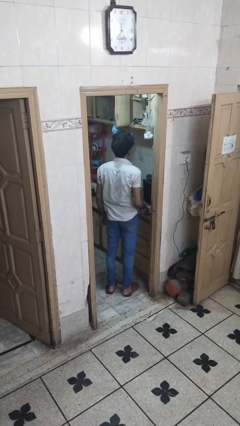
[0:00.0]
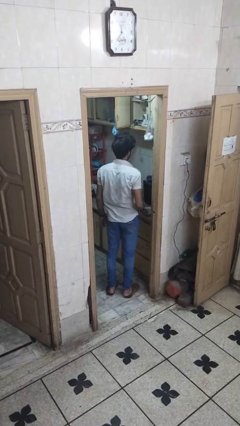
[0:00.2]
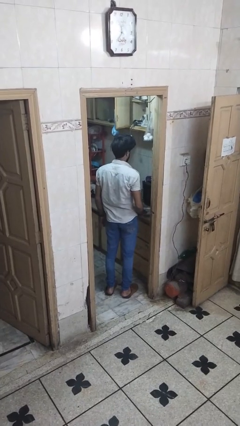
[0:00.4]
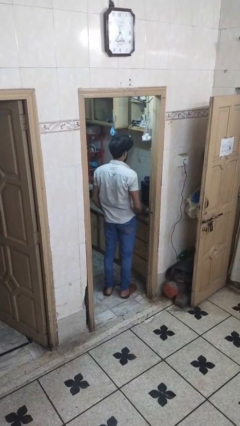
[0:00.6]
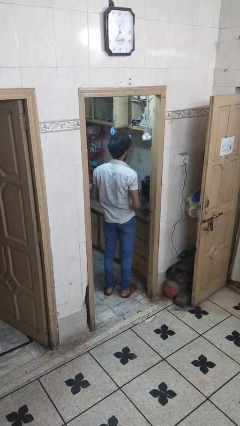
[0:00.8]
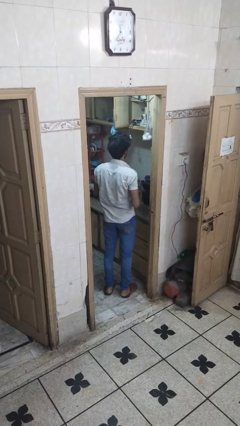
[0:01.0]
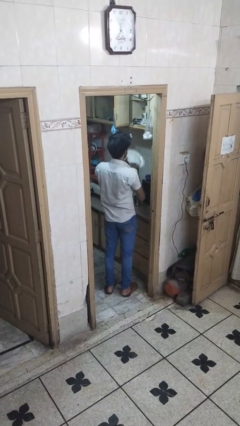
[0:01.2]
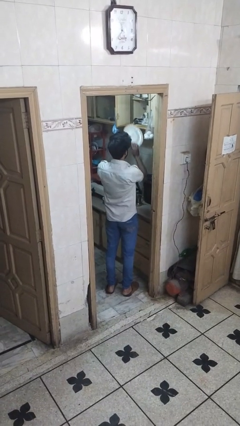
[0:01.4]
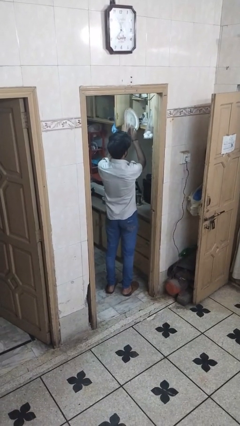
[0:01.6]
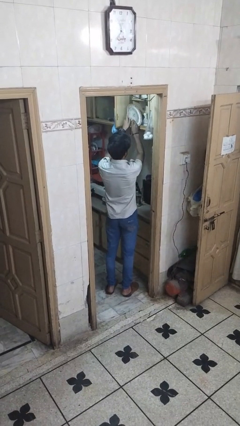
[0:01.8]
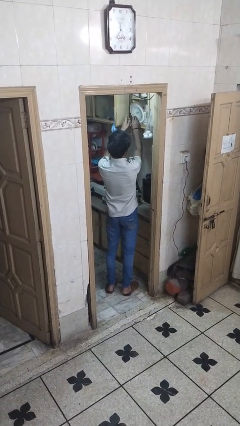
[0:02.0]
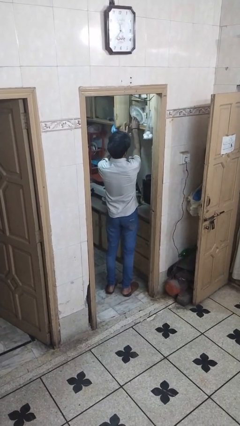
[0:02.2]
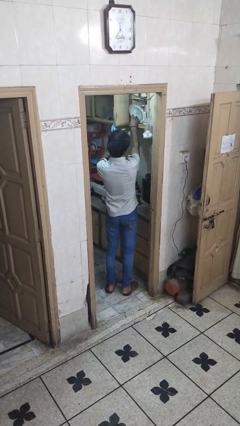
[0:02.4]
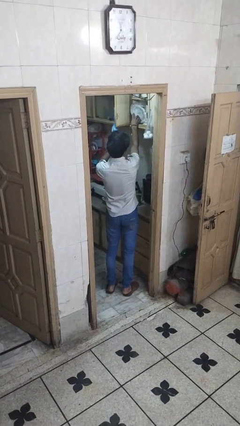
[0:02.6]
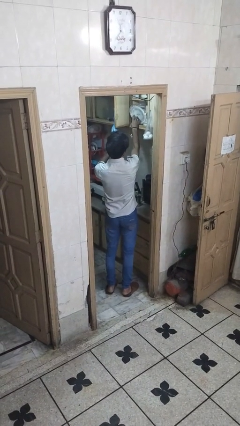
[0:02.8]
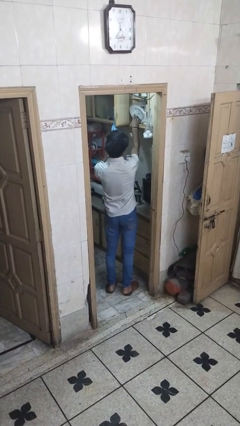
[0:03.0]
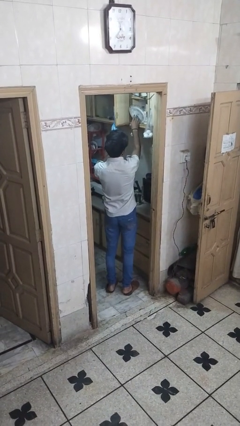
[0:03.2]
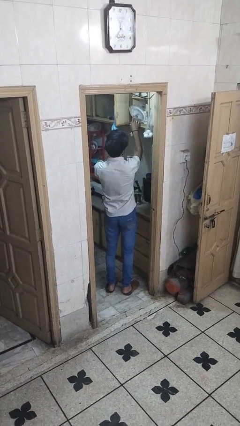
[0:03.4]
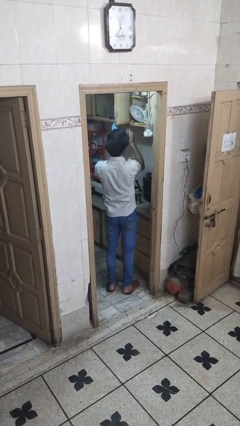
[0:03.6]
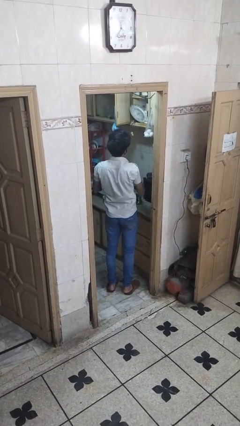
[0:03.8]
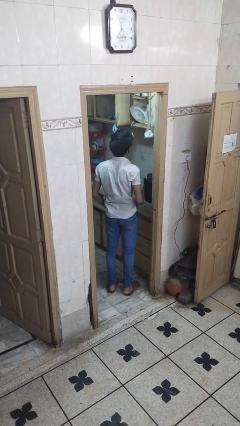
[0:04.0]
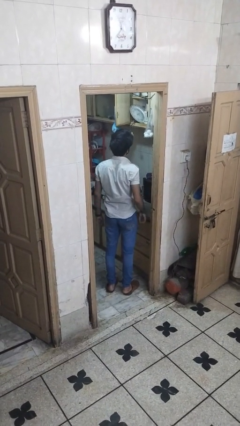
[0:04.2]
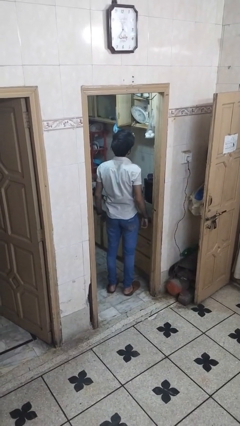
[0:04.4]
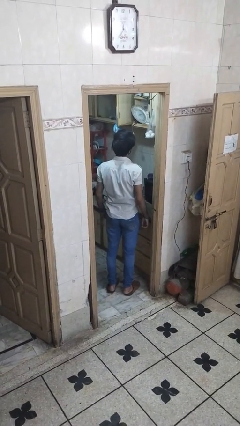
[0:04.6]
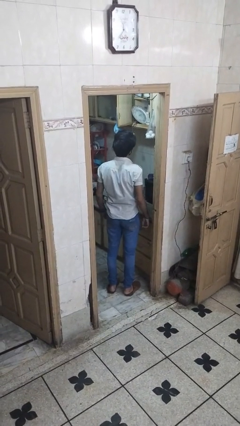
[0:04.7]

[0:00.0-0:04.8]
person puts object in cabinet

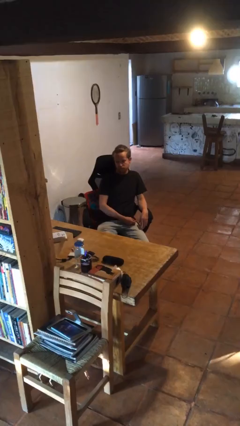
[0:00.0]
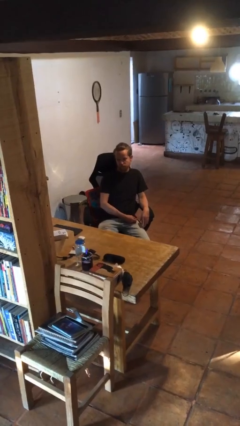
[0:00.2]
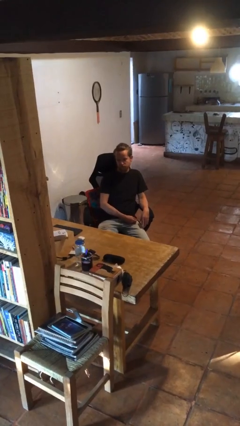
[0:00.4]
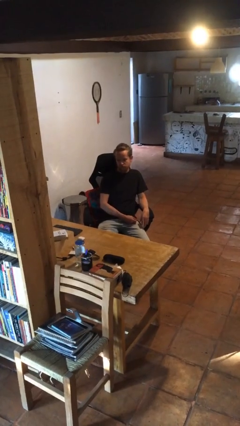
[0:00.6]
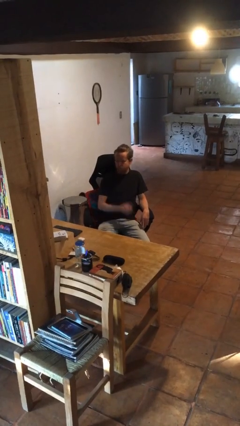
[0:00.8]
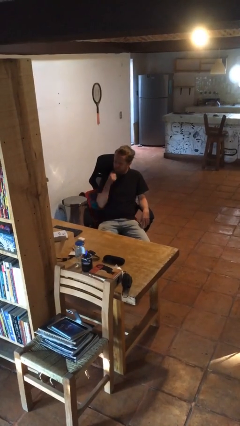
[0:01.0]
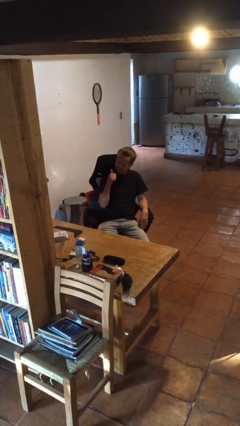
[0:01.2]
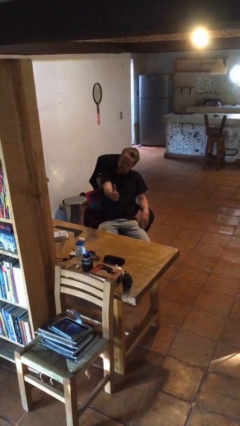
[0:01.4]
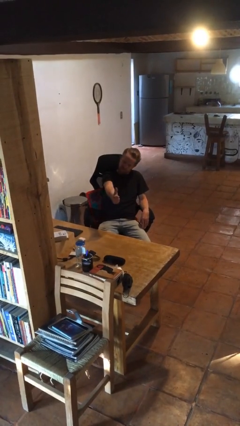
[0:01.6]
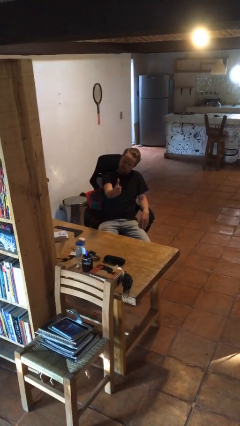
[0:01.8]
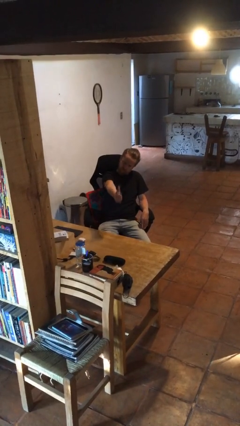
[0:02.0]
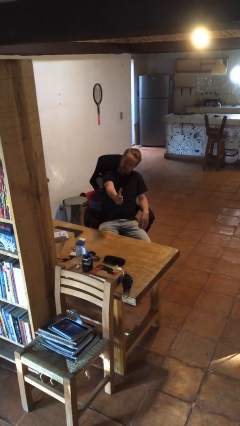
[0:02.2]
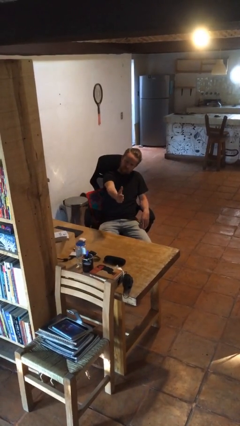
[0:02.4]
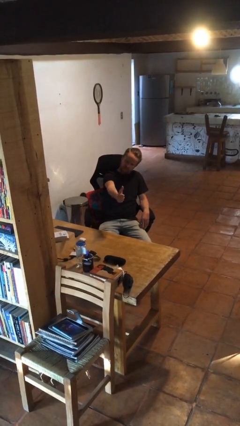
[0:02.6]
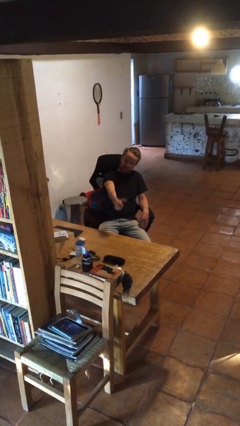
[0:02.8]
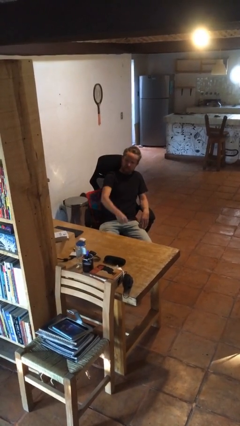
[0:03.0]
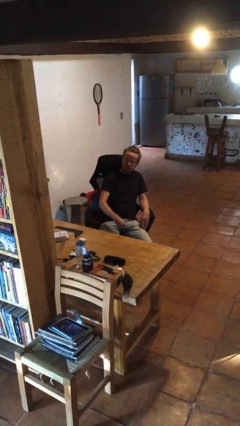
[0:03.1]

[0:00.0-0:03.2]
person gestures thumbs up

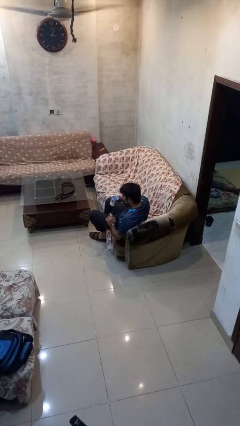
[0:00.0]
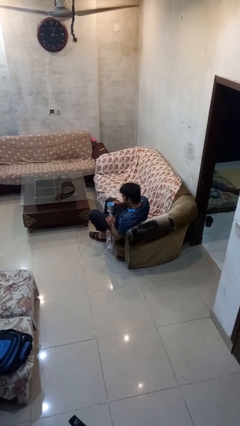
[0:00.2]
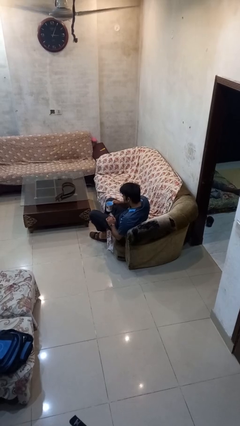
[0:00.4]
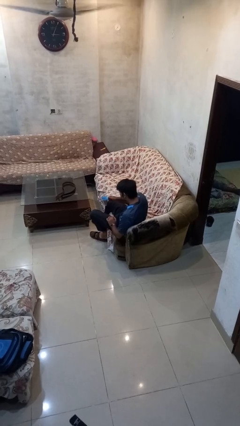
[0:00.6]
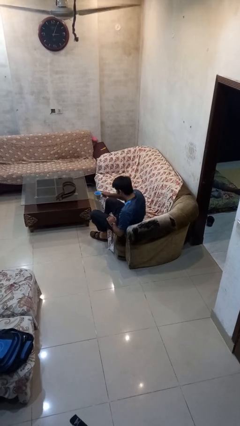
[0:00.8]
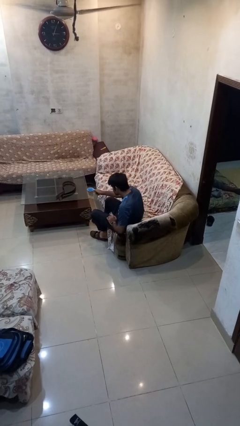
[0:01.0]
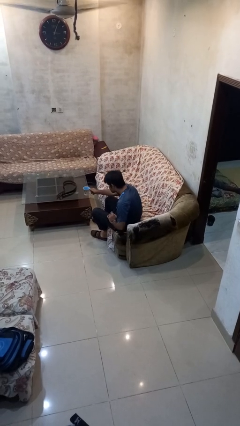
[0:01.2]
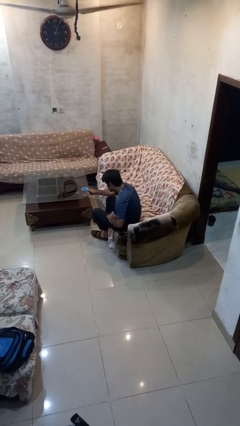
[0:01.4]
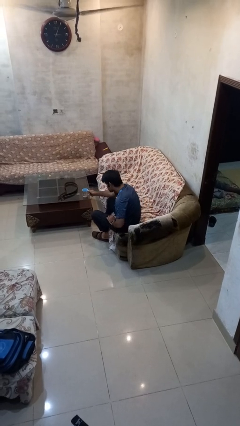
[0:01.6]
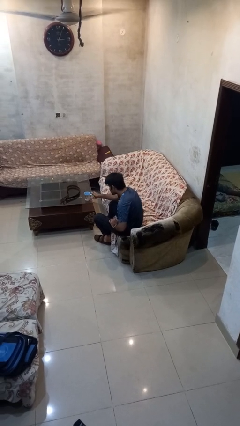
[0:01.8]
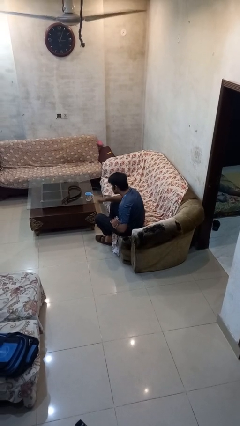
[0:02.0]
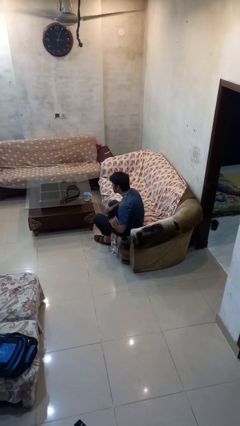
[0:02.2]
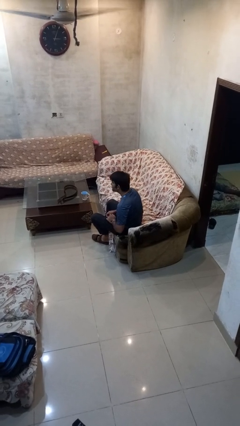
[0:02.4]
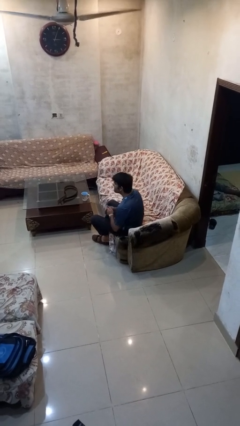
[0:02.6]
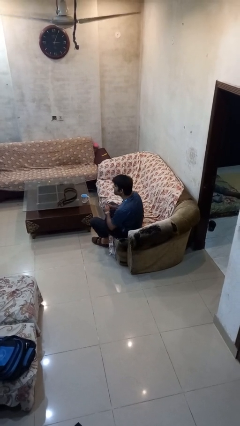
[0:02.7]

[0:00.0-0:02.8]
person puts down object on table

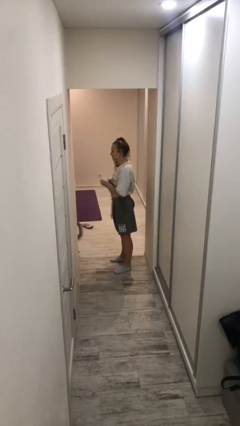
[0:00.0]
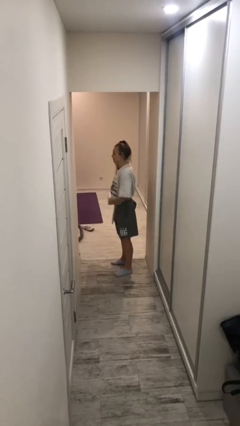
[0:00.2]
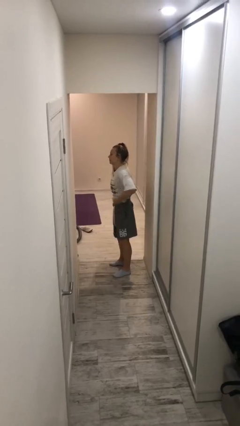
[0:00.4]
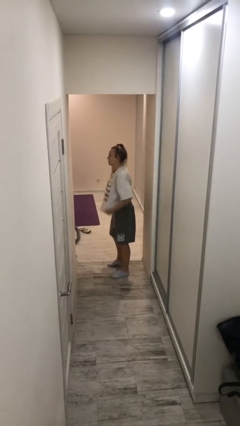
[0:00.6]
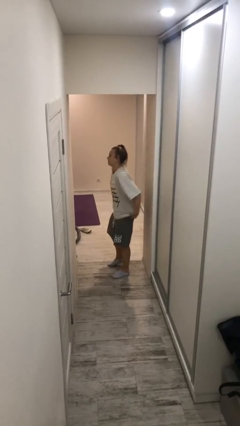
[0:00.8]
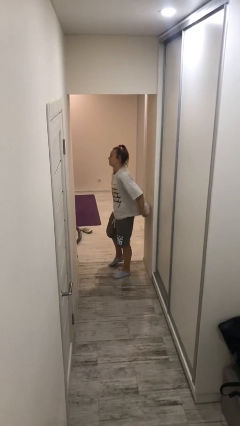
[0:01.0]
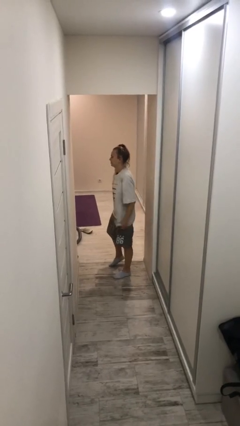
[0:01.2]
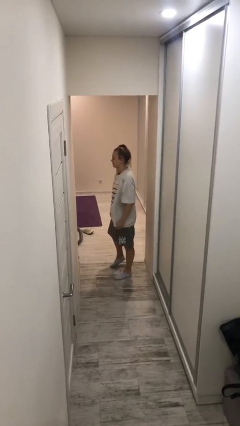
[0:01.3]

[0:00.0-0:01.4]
person untucks shirt

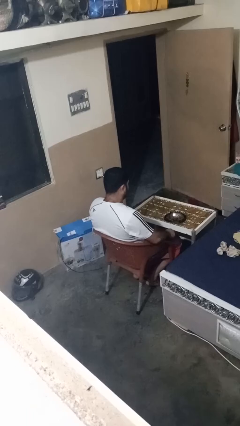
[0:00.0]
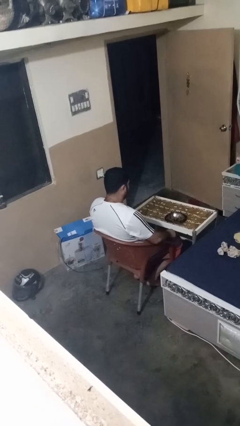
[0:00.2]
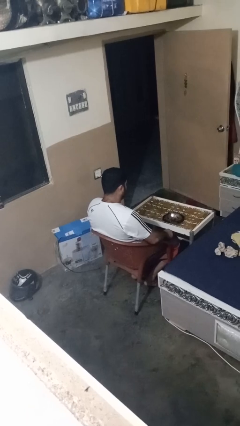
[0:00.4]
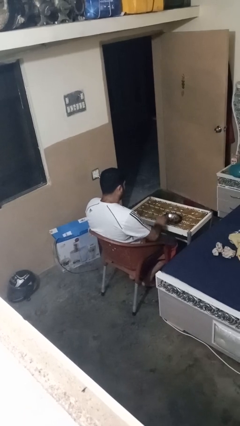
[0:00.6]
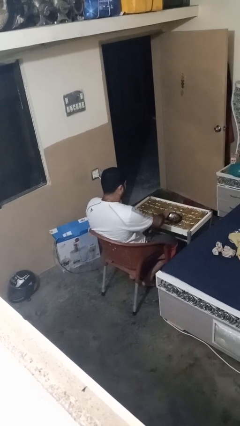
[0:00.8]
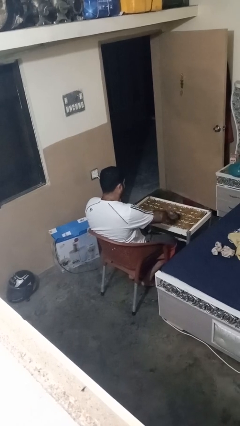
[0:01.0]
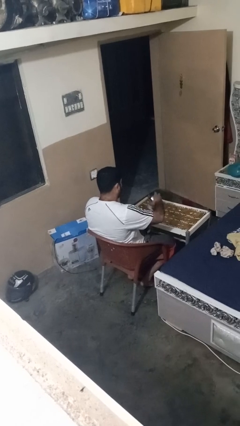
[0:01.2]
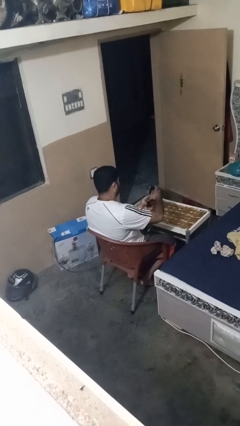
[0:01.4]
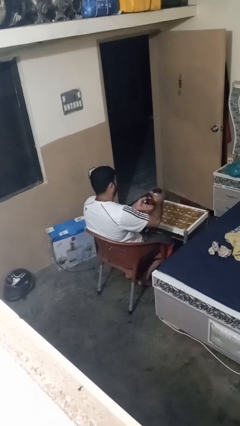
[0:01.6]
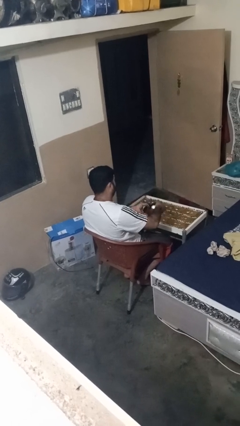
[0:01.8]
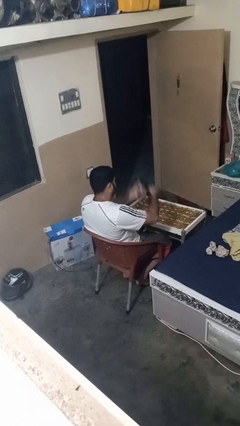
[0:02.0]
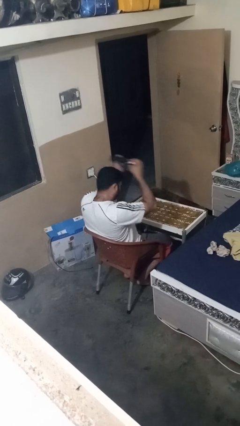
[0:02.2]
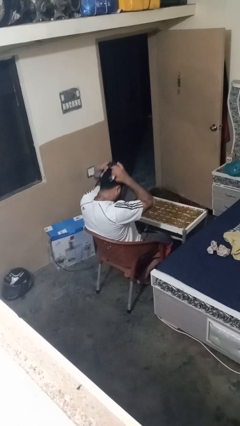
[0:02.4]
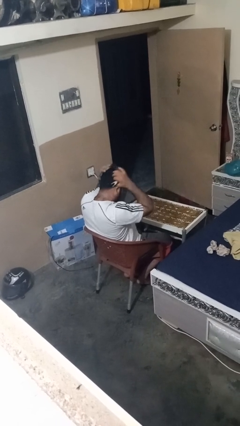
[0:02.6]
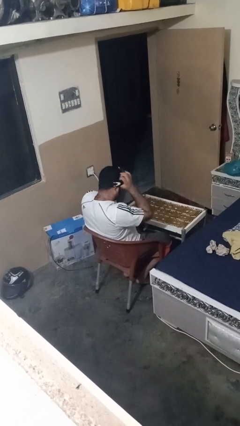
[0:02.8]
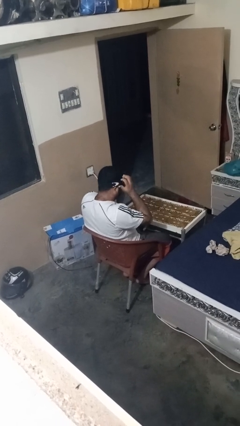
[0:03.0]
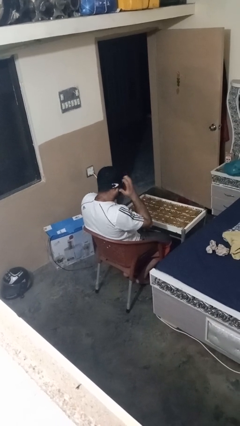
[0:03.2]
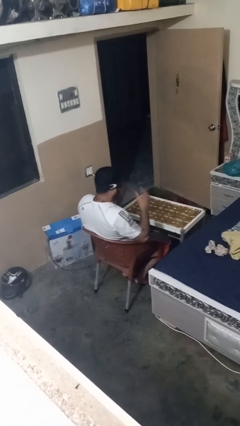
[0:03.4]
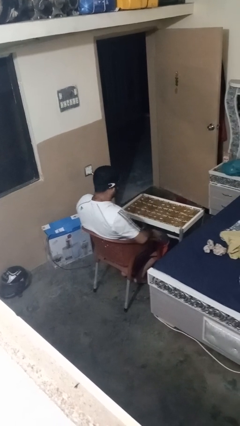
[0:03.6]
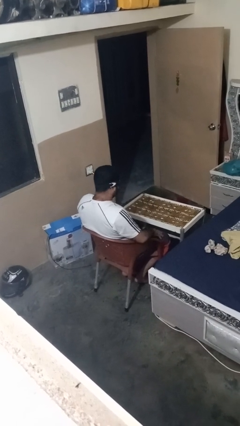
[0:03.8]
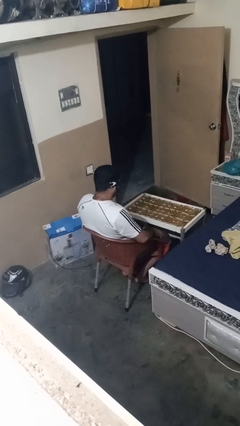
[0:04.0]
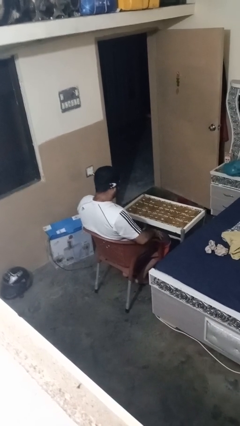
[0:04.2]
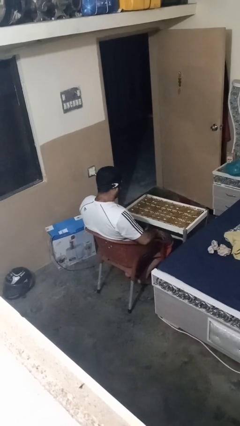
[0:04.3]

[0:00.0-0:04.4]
person puts on sunglasses

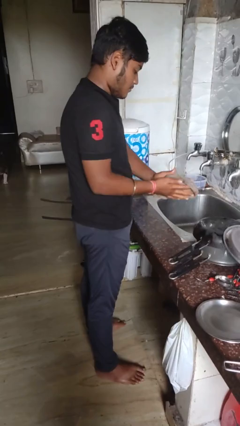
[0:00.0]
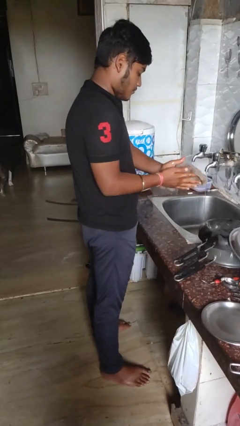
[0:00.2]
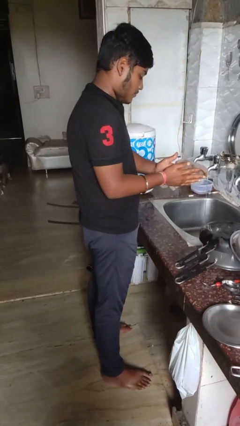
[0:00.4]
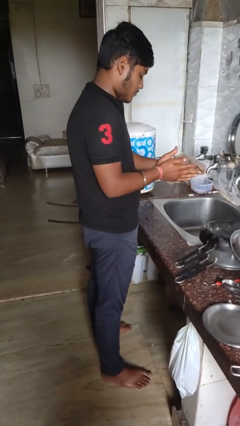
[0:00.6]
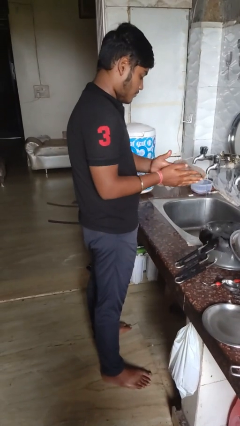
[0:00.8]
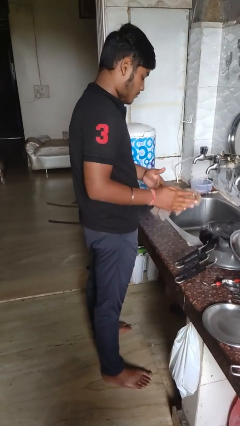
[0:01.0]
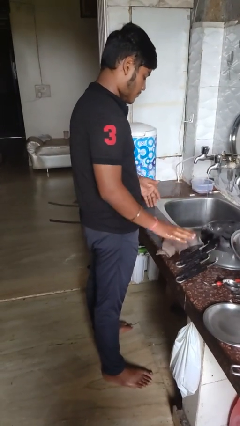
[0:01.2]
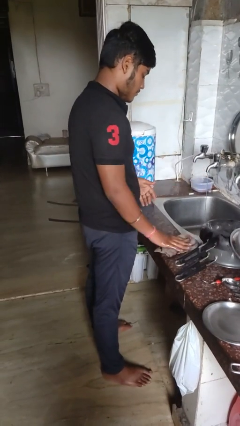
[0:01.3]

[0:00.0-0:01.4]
person dries hands with towel
